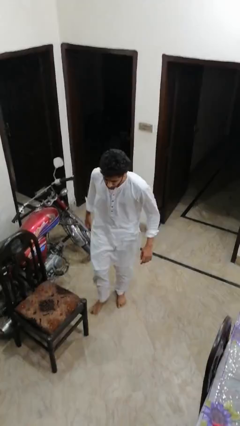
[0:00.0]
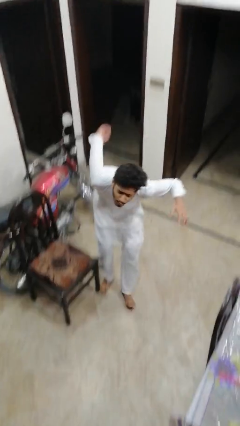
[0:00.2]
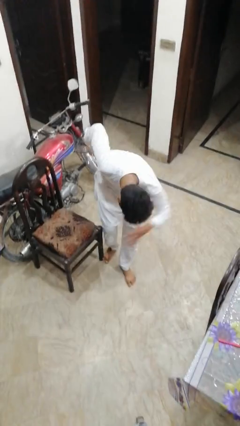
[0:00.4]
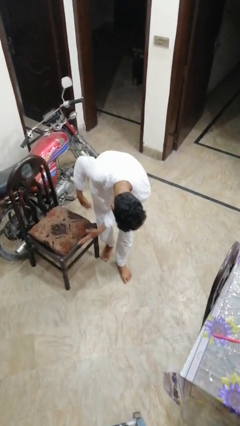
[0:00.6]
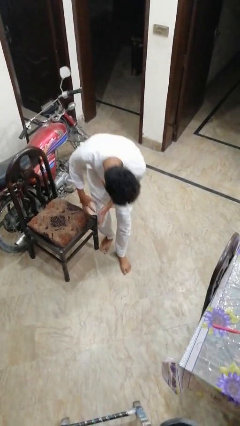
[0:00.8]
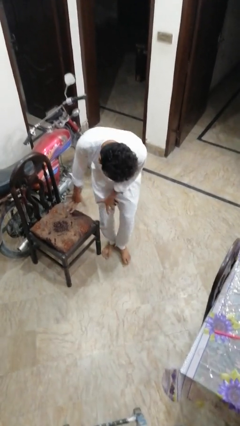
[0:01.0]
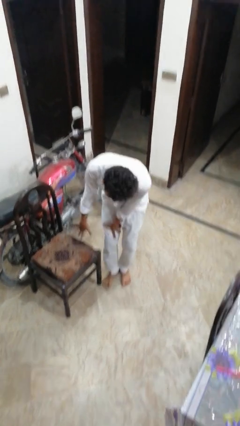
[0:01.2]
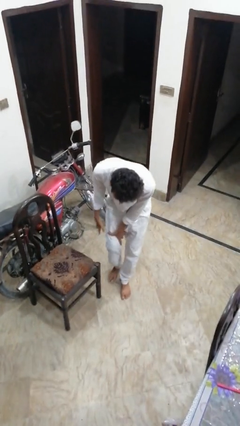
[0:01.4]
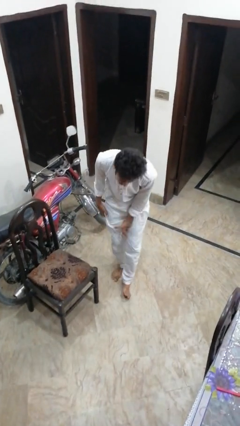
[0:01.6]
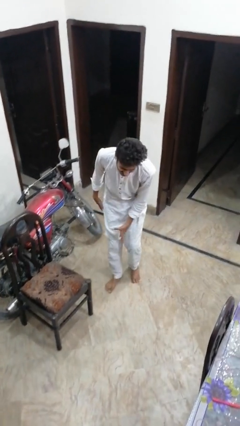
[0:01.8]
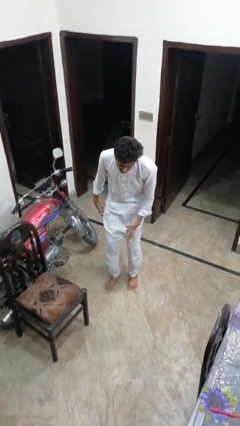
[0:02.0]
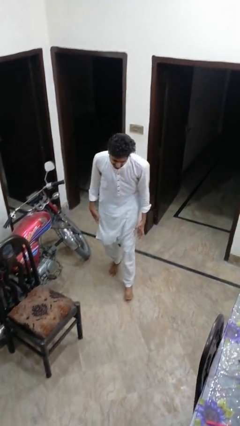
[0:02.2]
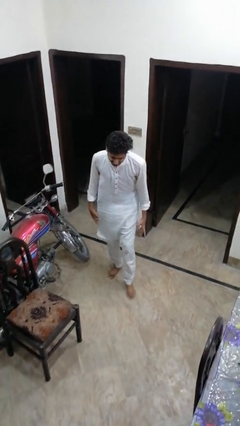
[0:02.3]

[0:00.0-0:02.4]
person stubs toe

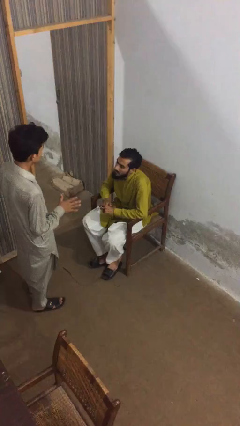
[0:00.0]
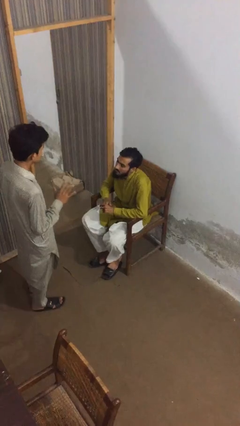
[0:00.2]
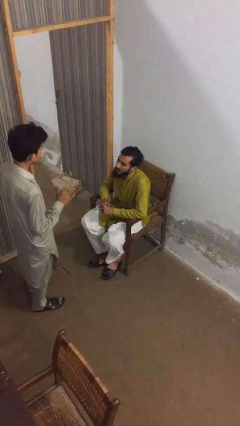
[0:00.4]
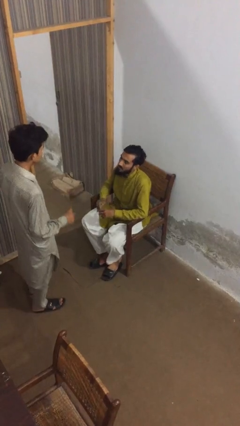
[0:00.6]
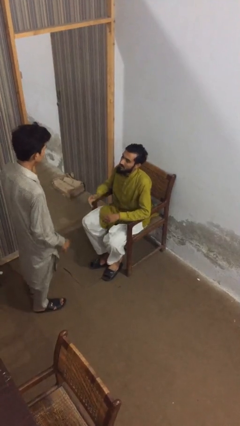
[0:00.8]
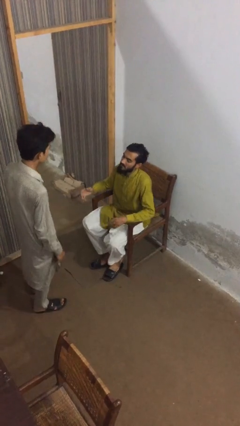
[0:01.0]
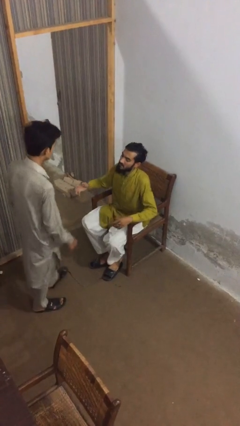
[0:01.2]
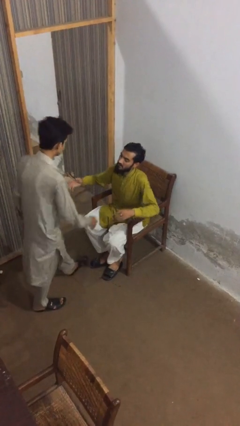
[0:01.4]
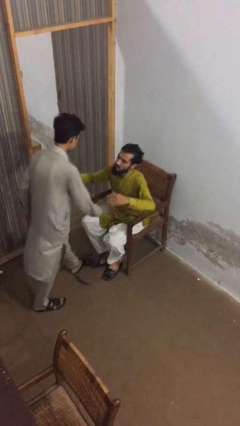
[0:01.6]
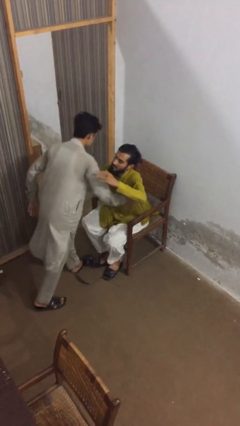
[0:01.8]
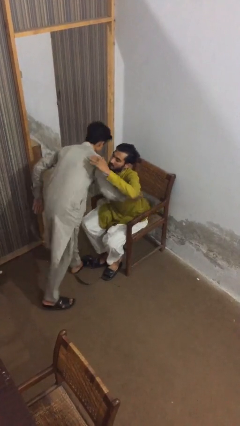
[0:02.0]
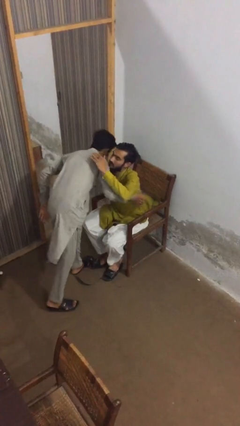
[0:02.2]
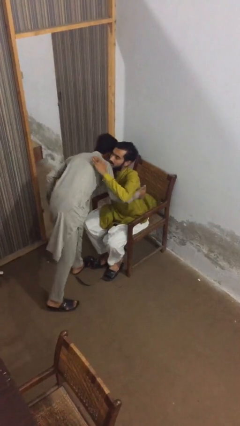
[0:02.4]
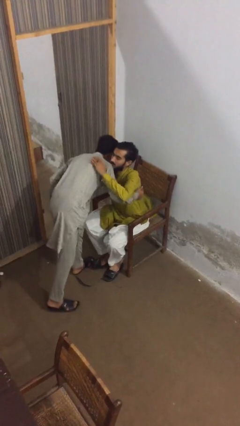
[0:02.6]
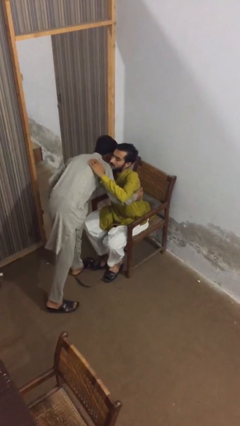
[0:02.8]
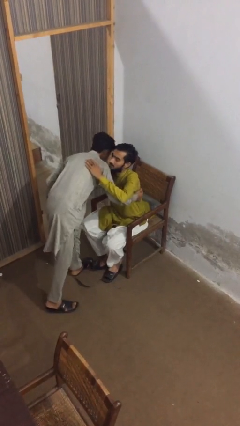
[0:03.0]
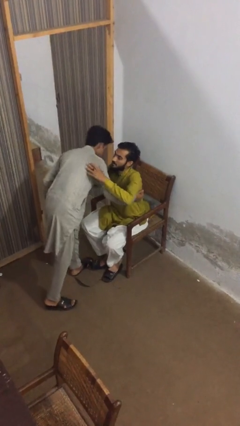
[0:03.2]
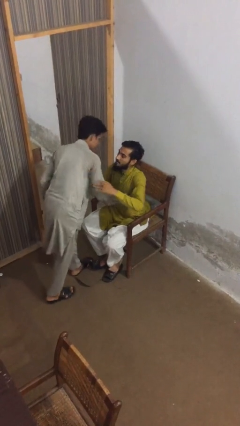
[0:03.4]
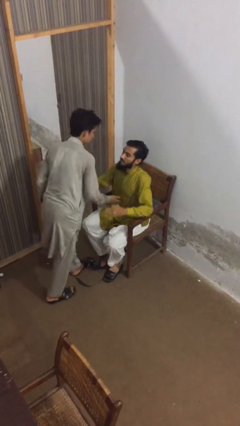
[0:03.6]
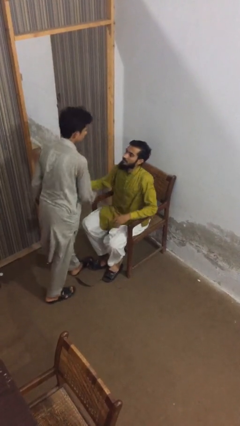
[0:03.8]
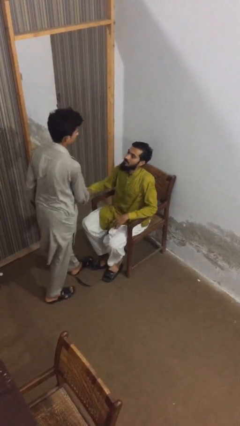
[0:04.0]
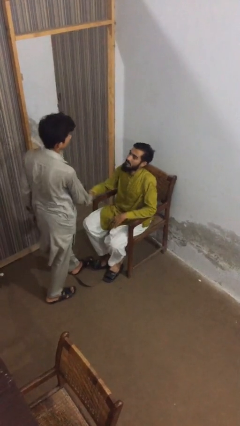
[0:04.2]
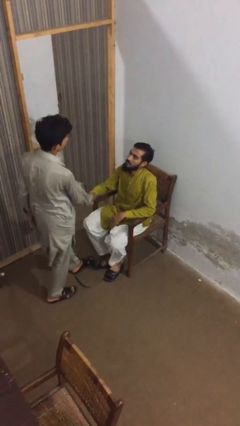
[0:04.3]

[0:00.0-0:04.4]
person embraces person

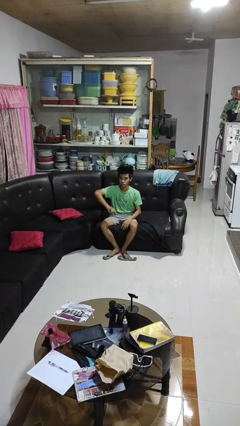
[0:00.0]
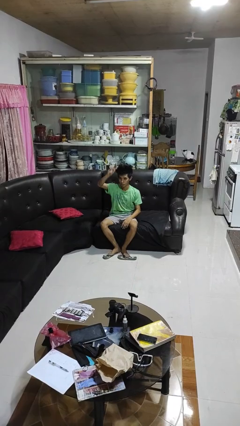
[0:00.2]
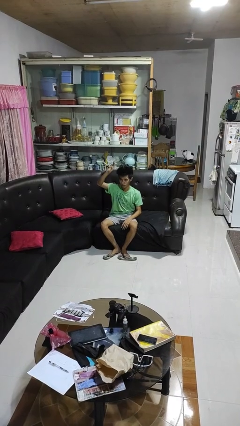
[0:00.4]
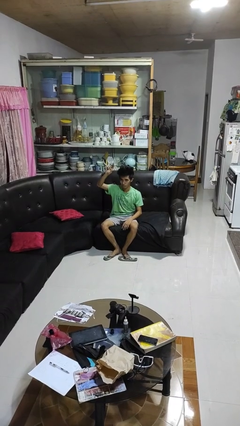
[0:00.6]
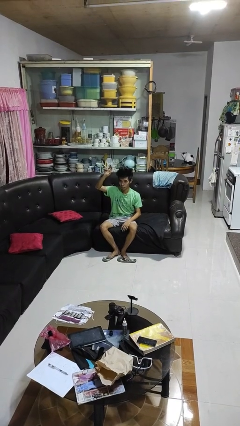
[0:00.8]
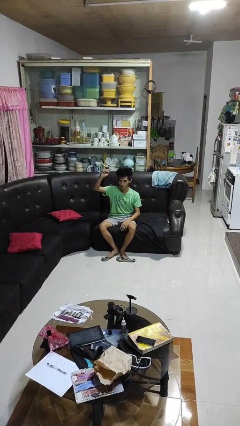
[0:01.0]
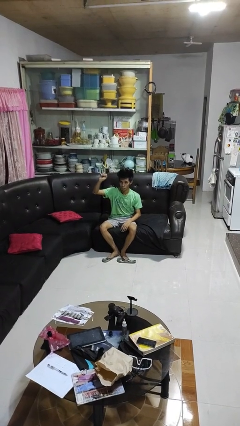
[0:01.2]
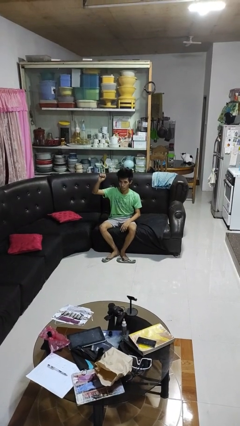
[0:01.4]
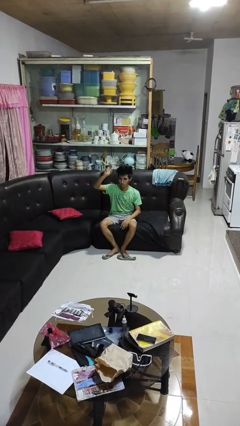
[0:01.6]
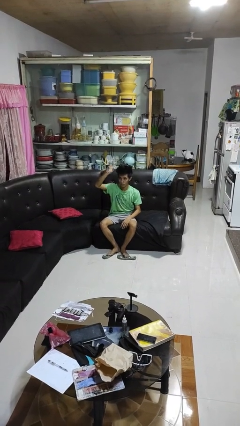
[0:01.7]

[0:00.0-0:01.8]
person gestures swipe up

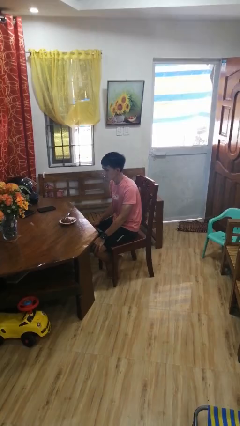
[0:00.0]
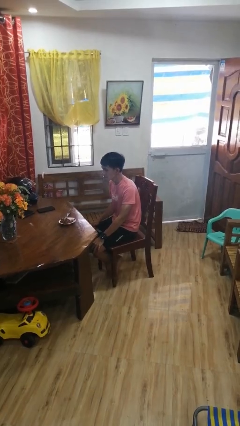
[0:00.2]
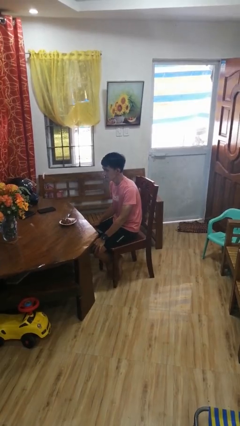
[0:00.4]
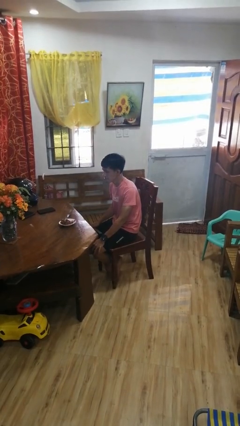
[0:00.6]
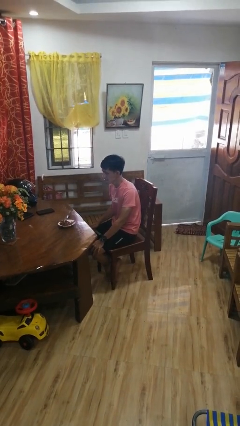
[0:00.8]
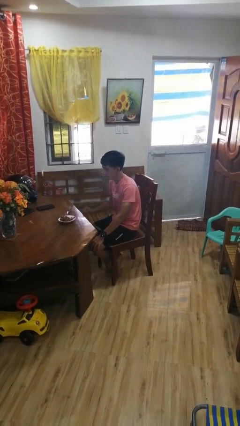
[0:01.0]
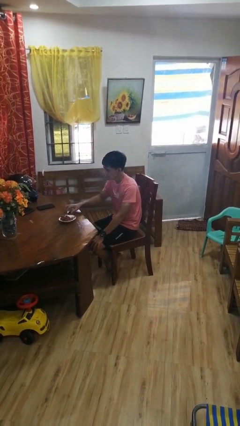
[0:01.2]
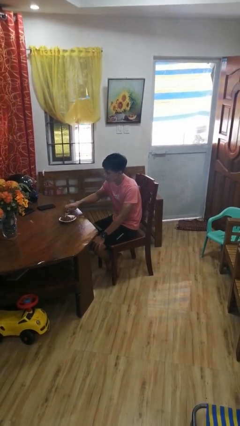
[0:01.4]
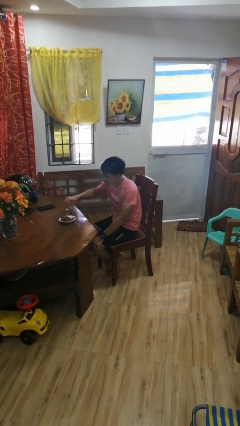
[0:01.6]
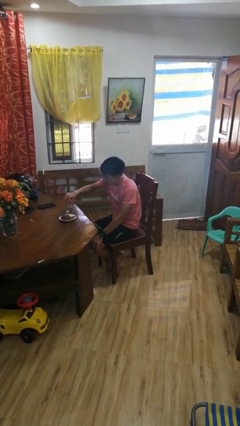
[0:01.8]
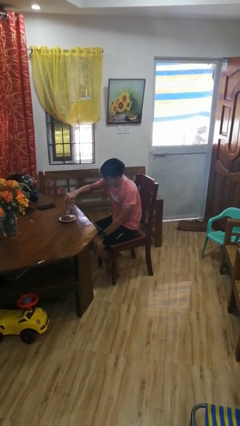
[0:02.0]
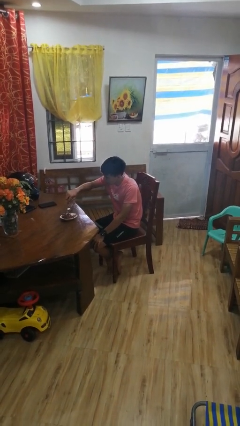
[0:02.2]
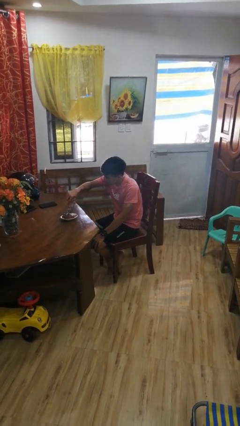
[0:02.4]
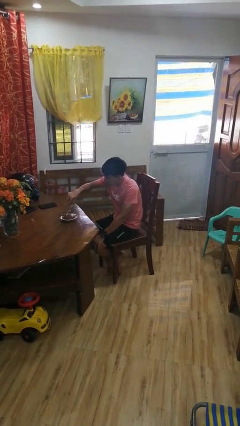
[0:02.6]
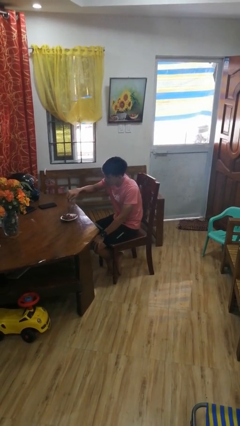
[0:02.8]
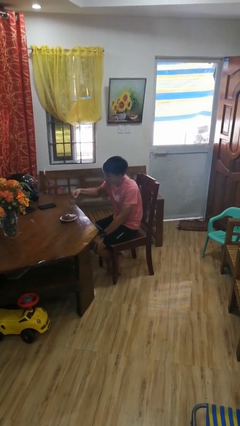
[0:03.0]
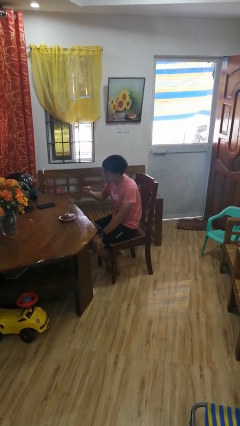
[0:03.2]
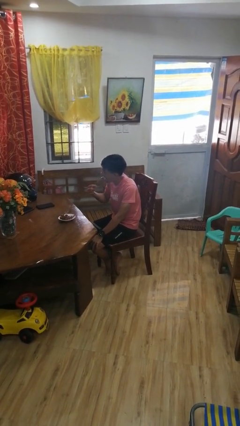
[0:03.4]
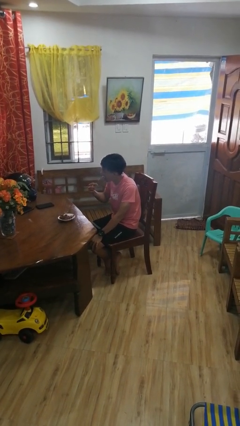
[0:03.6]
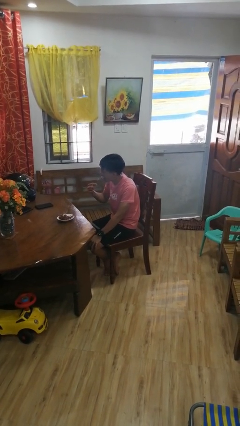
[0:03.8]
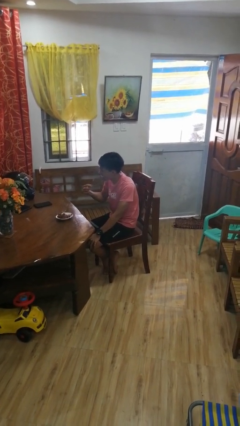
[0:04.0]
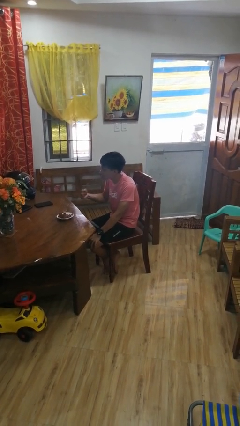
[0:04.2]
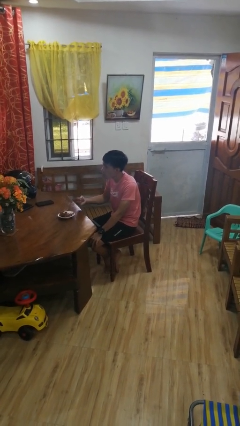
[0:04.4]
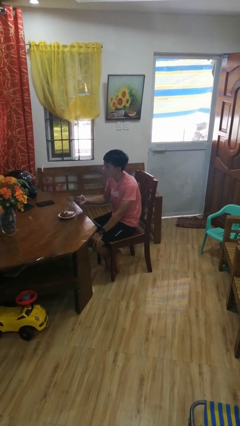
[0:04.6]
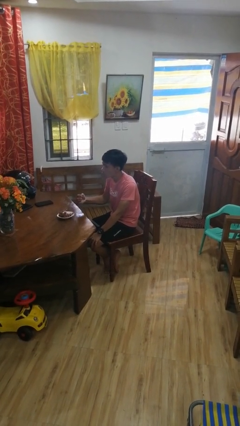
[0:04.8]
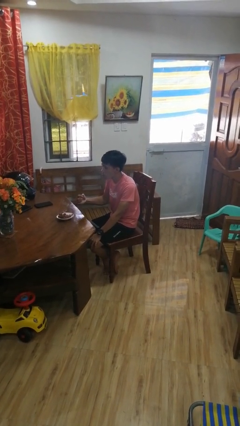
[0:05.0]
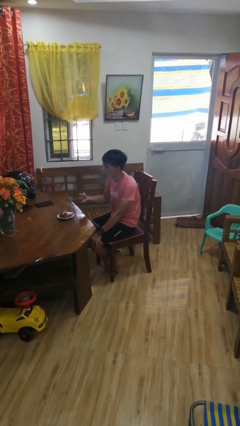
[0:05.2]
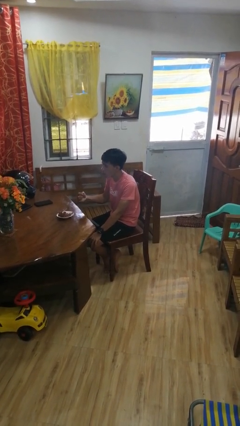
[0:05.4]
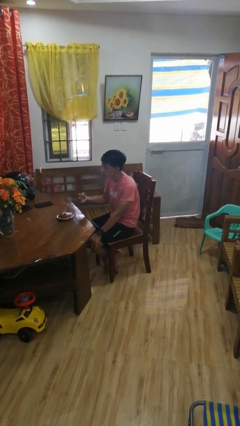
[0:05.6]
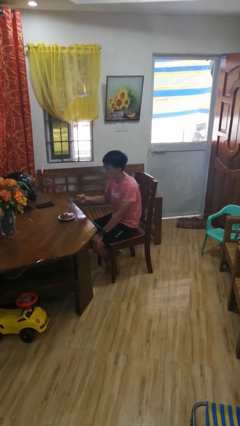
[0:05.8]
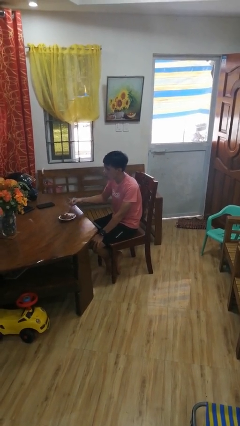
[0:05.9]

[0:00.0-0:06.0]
person eats with utensil

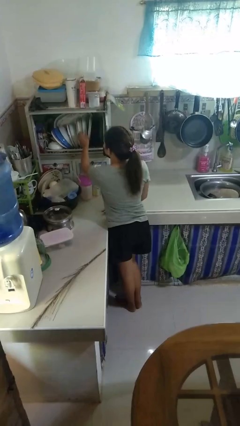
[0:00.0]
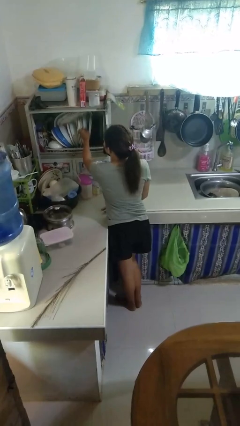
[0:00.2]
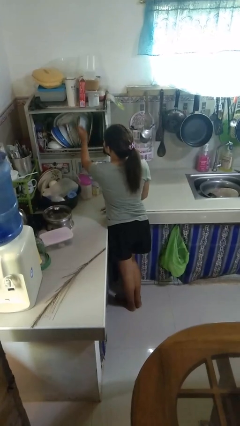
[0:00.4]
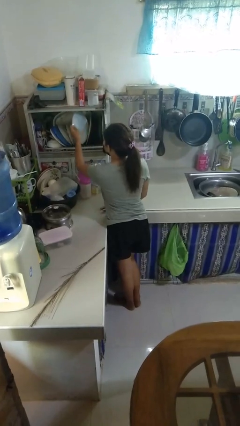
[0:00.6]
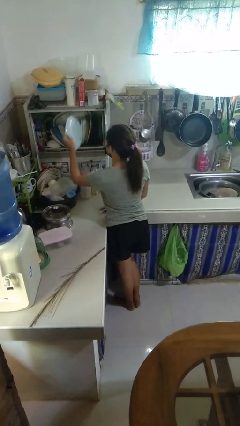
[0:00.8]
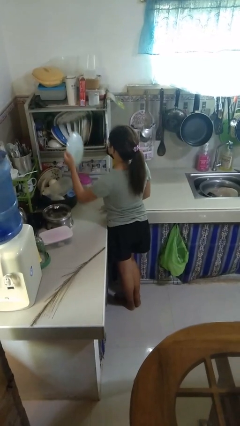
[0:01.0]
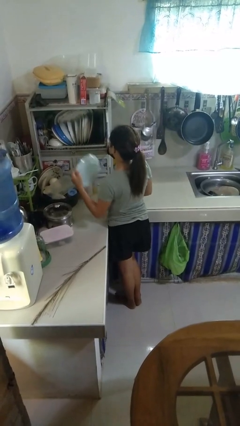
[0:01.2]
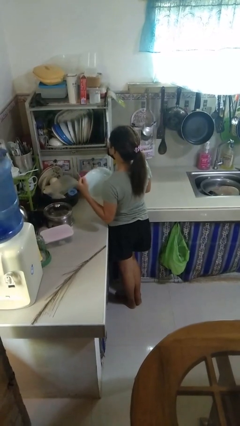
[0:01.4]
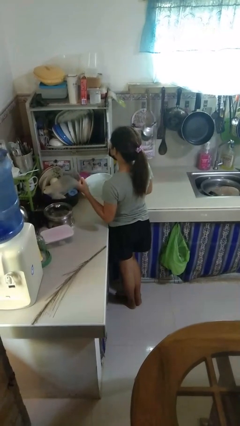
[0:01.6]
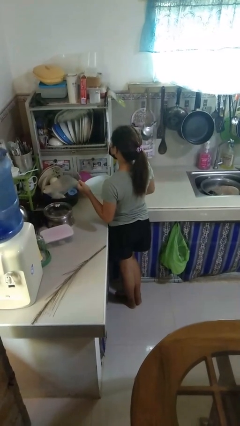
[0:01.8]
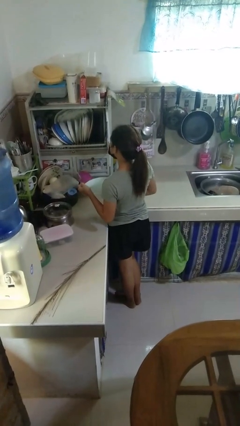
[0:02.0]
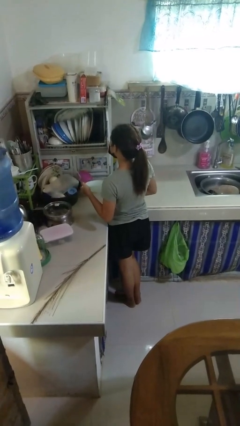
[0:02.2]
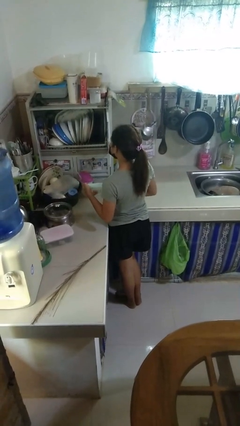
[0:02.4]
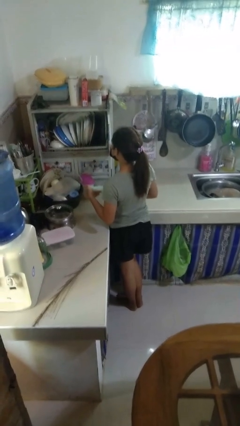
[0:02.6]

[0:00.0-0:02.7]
person takes object from kitchen drawer

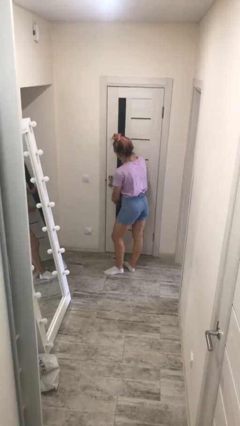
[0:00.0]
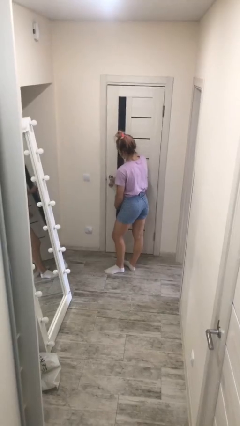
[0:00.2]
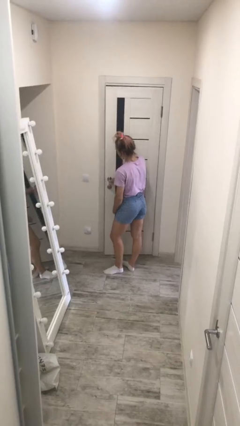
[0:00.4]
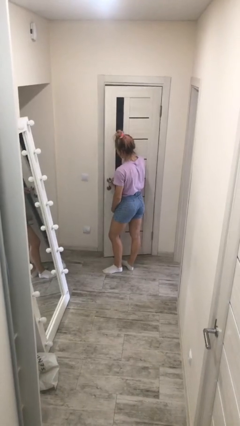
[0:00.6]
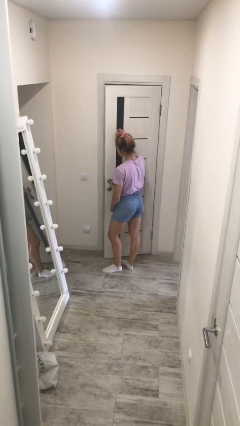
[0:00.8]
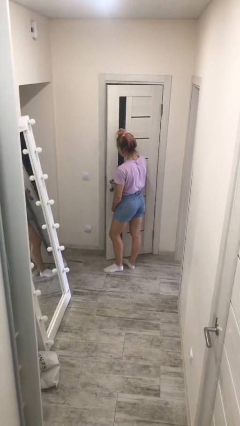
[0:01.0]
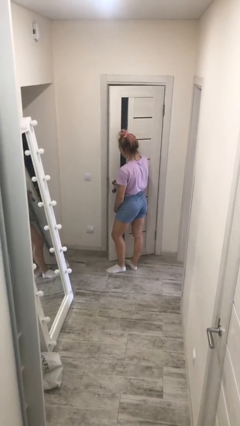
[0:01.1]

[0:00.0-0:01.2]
person opens facility door
